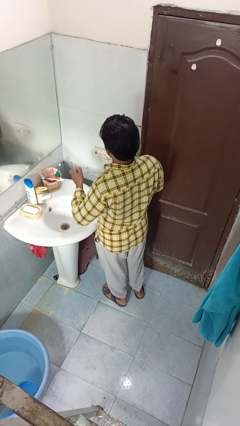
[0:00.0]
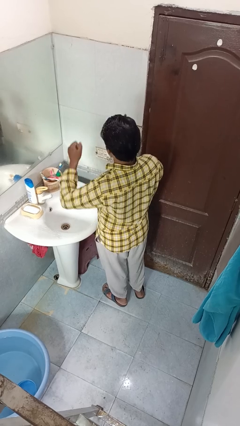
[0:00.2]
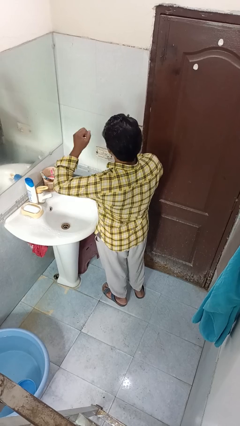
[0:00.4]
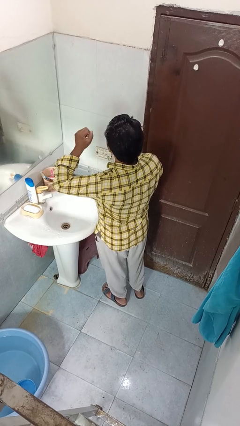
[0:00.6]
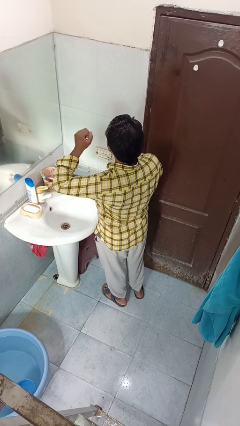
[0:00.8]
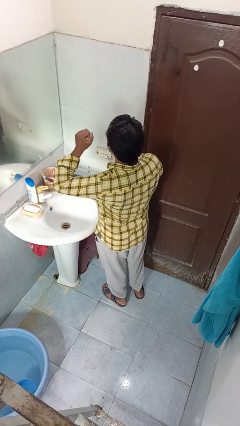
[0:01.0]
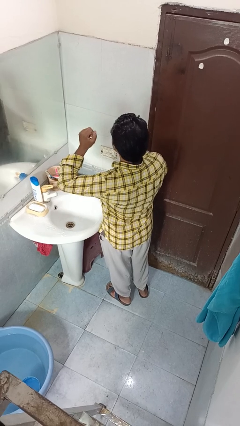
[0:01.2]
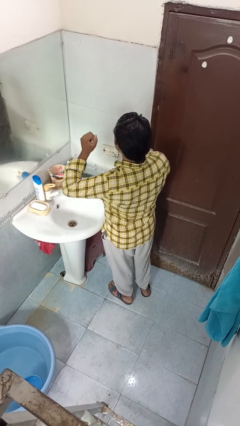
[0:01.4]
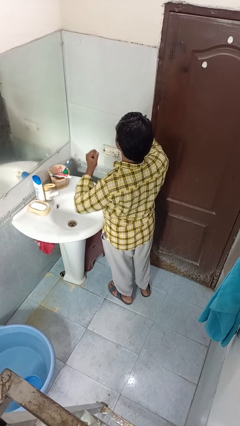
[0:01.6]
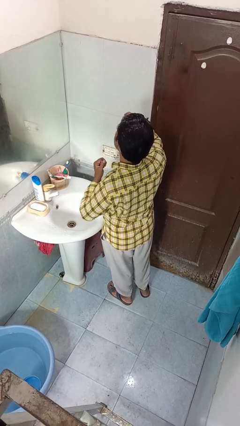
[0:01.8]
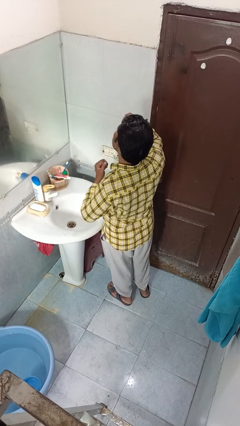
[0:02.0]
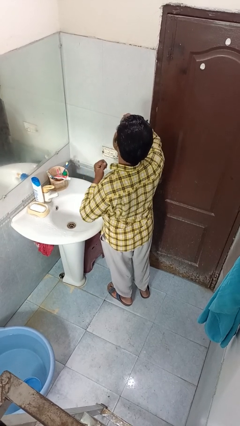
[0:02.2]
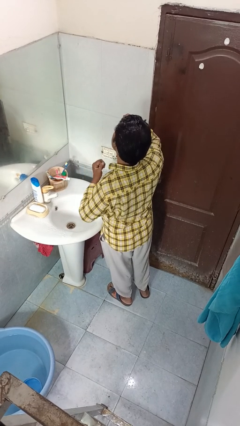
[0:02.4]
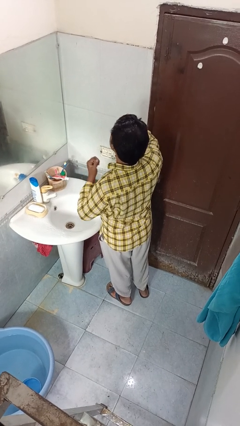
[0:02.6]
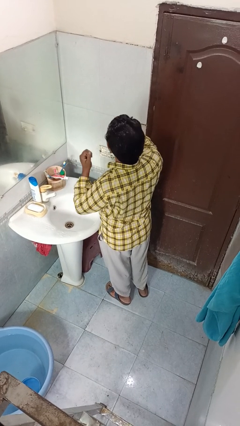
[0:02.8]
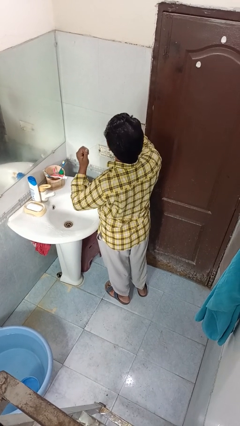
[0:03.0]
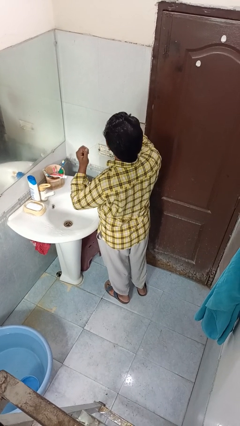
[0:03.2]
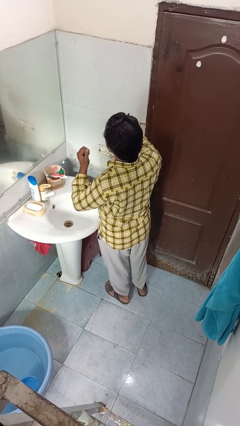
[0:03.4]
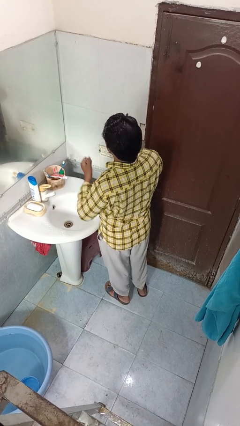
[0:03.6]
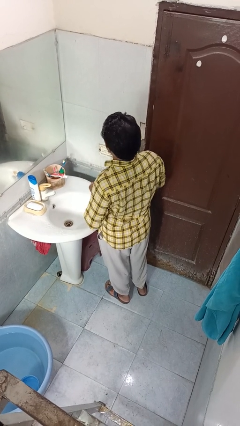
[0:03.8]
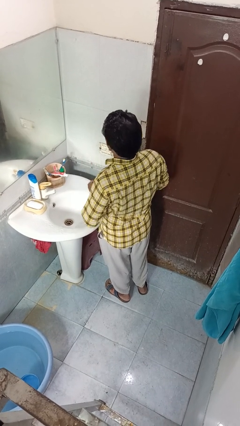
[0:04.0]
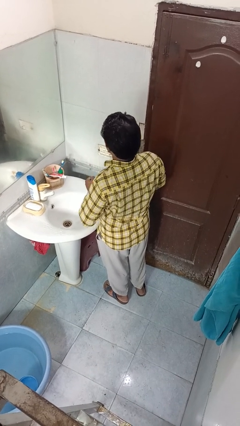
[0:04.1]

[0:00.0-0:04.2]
person flosses

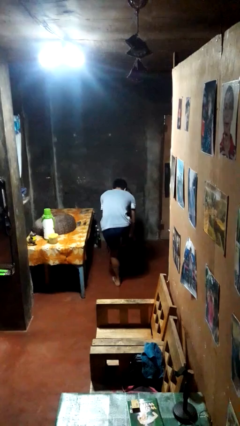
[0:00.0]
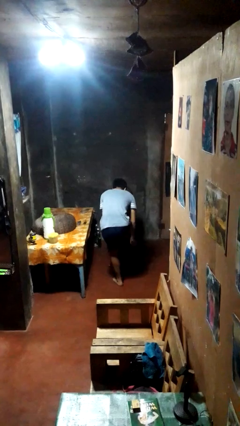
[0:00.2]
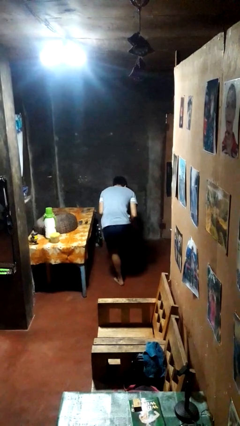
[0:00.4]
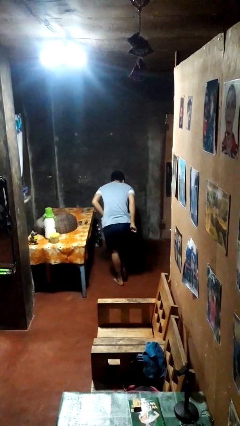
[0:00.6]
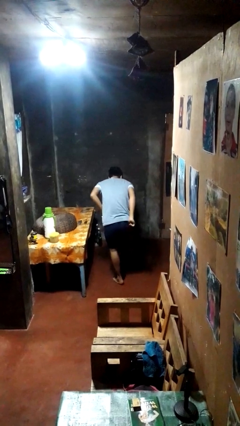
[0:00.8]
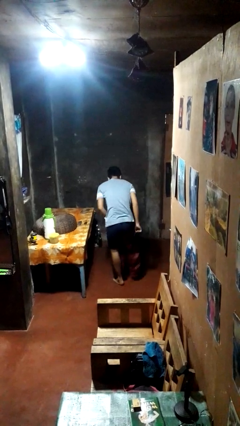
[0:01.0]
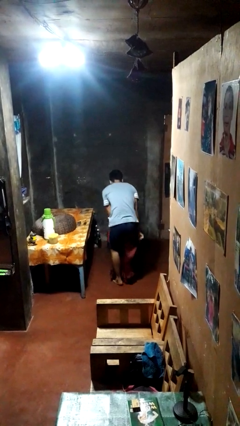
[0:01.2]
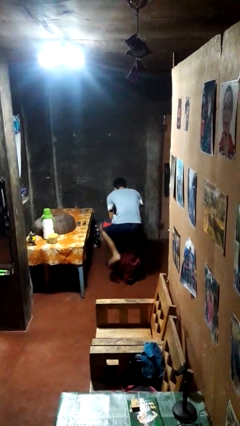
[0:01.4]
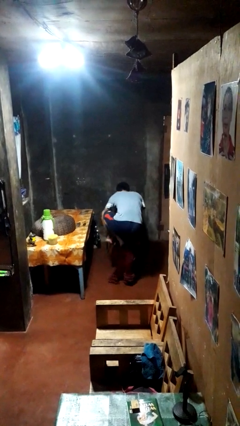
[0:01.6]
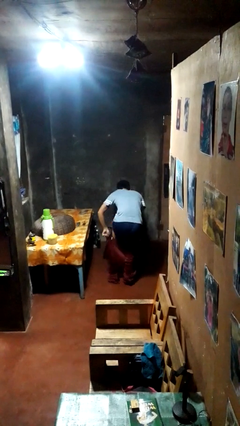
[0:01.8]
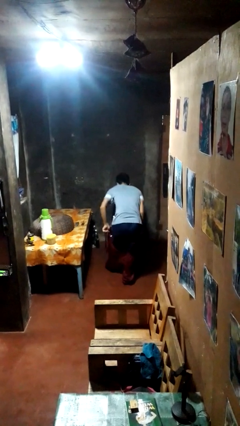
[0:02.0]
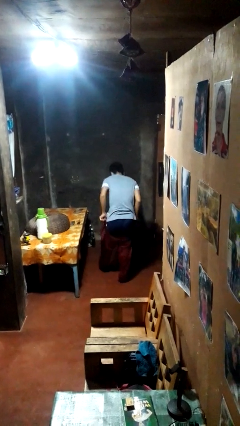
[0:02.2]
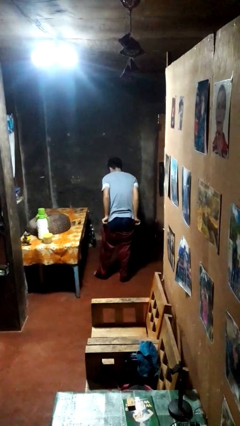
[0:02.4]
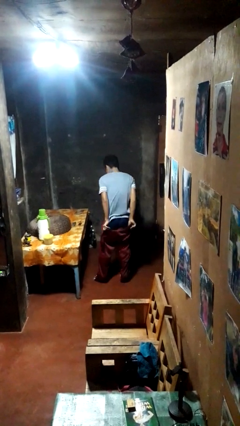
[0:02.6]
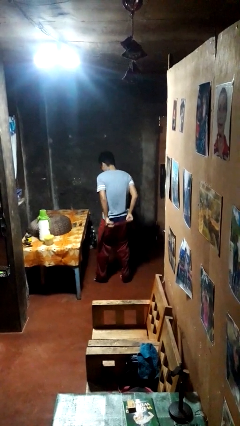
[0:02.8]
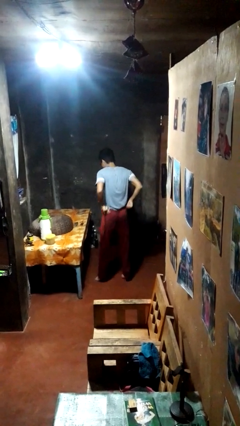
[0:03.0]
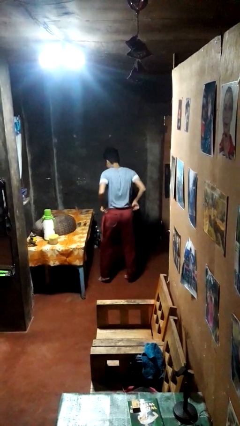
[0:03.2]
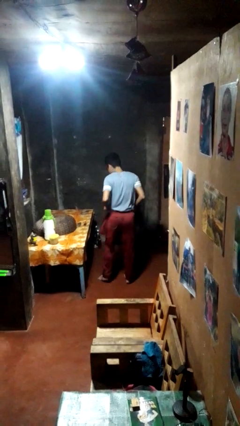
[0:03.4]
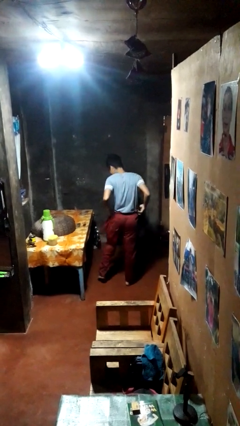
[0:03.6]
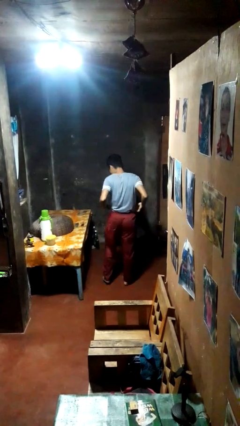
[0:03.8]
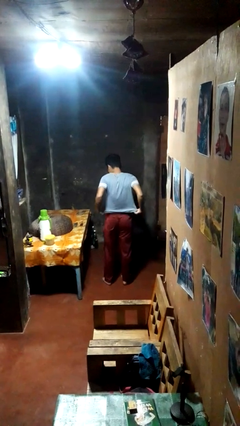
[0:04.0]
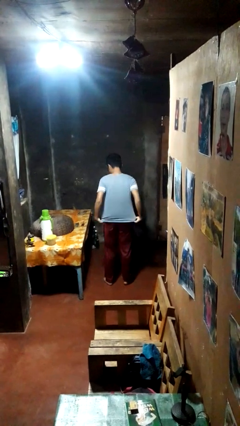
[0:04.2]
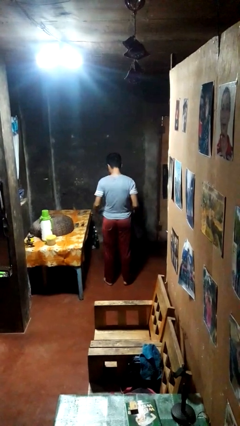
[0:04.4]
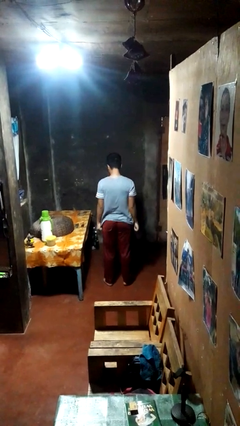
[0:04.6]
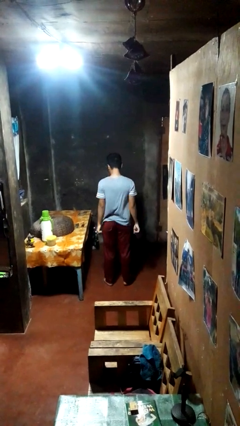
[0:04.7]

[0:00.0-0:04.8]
person puts on pants

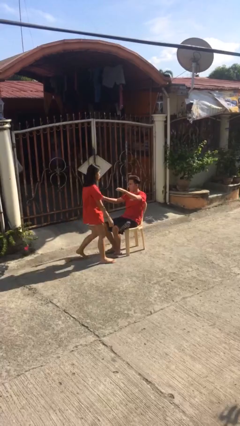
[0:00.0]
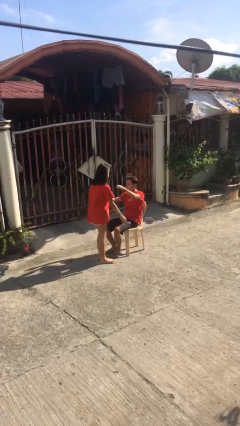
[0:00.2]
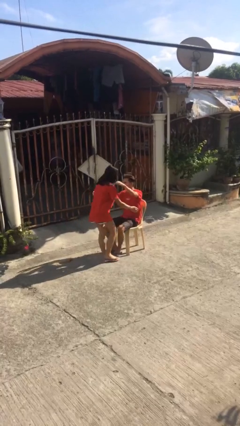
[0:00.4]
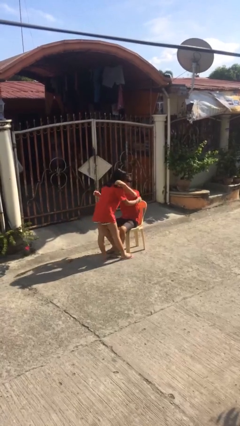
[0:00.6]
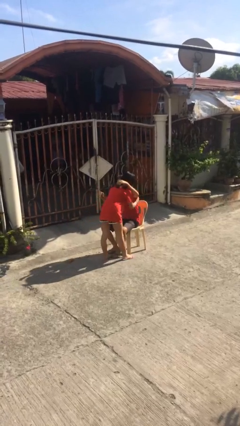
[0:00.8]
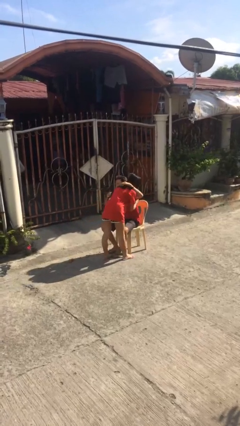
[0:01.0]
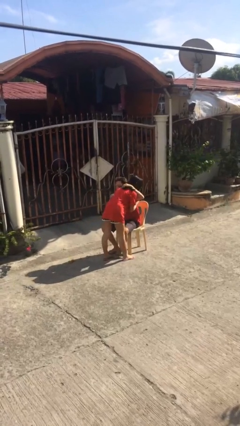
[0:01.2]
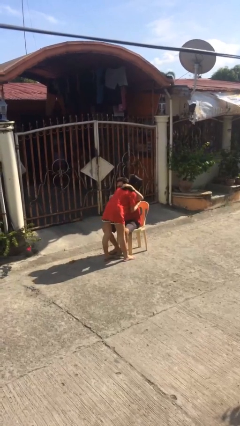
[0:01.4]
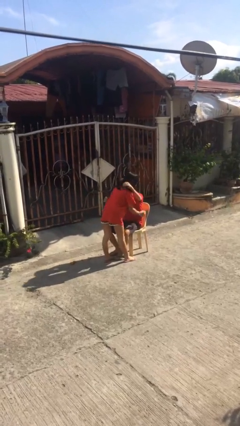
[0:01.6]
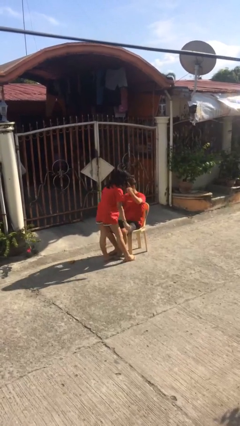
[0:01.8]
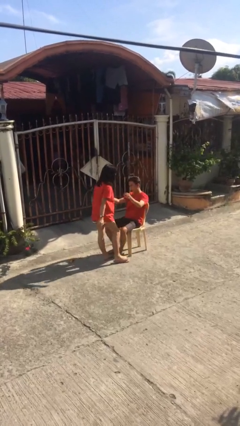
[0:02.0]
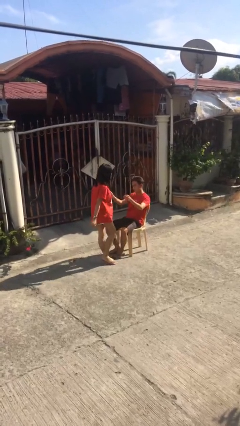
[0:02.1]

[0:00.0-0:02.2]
person embraces person

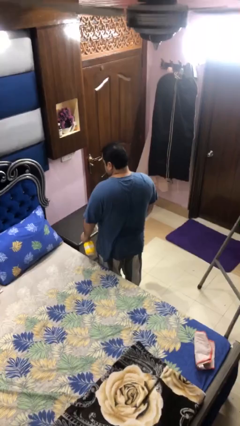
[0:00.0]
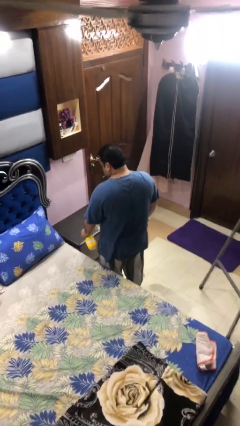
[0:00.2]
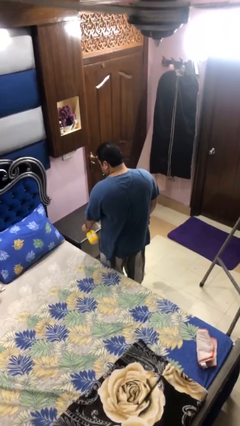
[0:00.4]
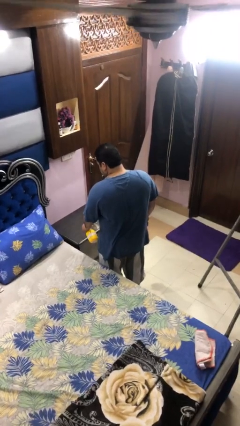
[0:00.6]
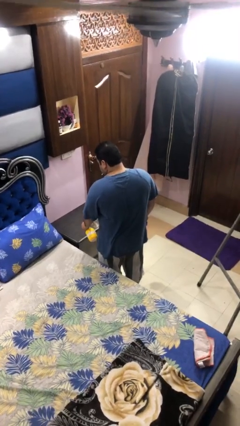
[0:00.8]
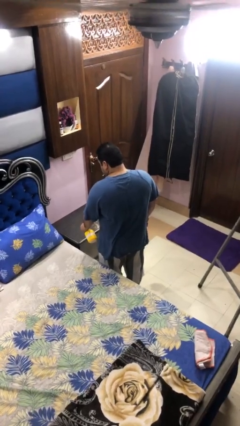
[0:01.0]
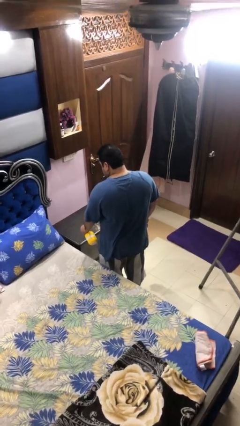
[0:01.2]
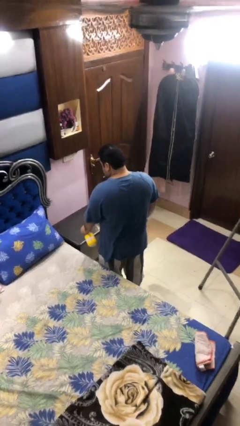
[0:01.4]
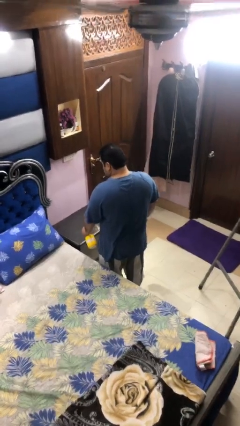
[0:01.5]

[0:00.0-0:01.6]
person sprays from bottle

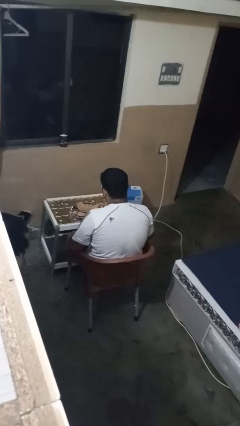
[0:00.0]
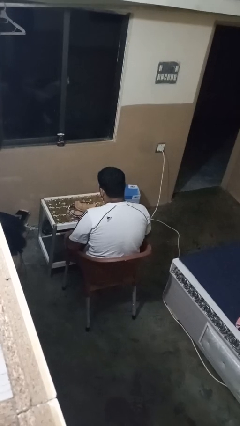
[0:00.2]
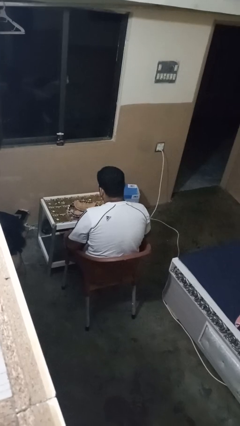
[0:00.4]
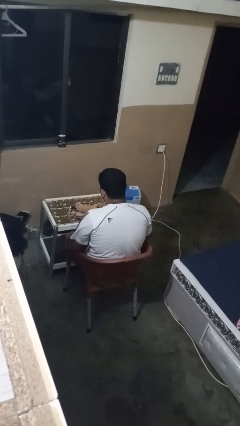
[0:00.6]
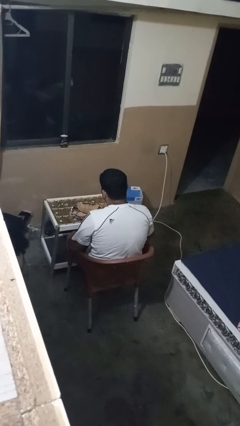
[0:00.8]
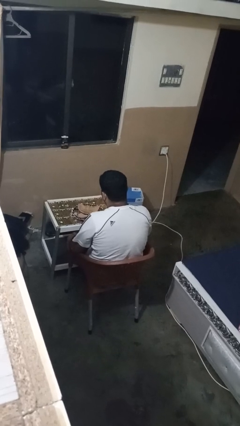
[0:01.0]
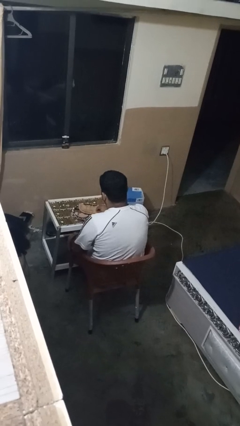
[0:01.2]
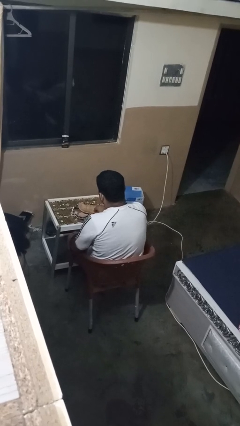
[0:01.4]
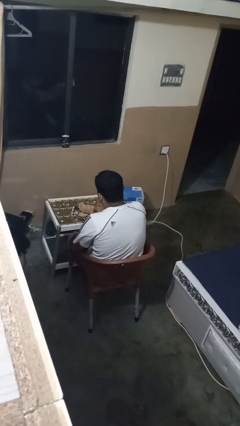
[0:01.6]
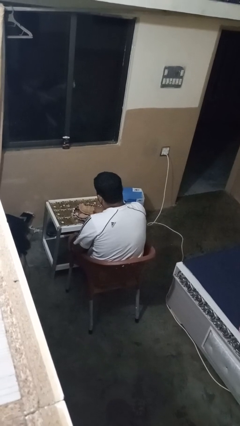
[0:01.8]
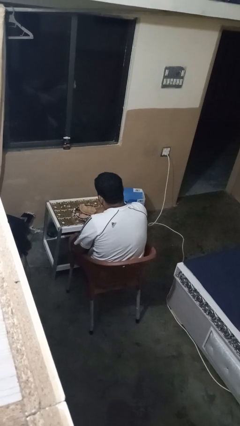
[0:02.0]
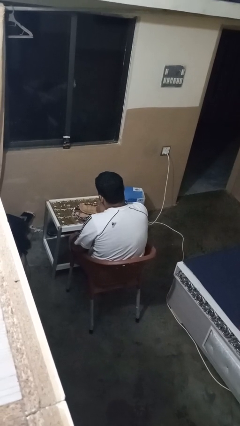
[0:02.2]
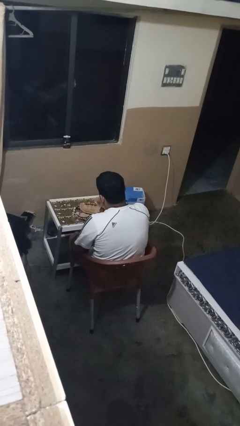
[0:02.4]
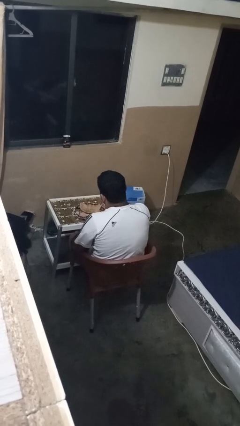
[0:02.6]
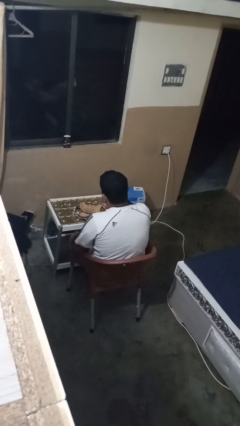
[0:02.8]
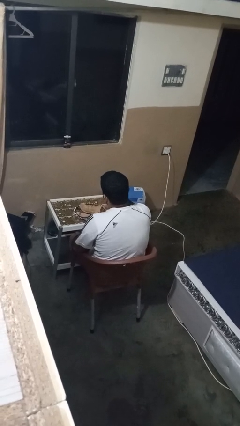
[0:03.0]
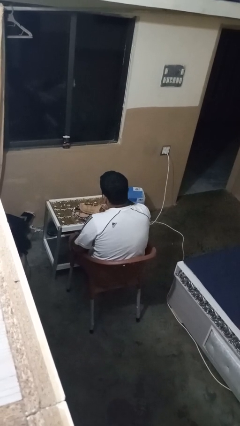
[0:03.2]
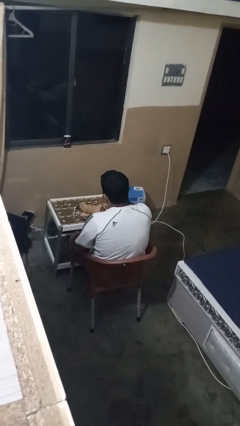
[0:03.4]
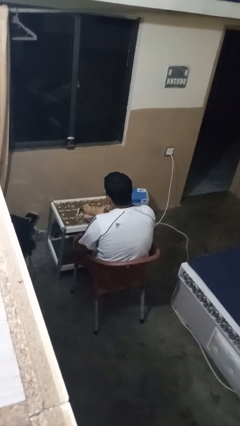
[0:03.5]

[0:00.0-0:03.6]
person eats with hands

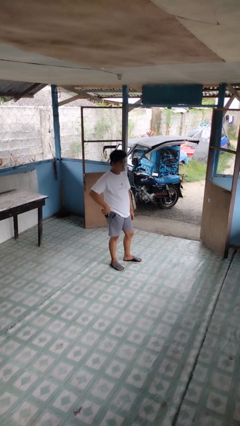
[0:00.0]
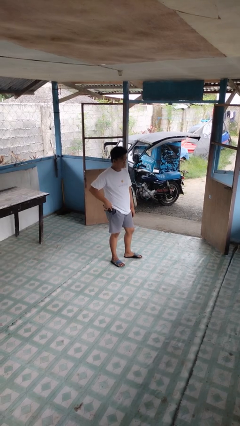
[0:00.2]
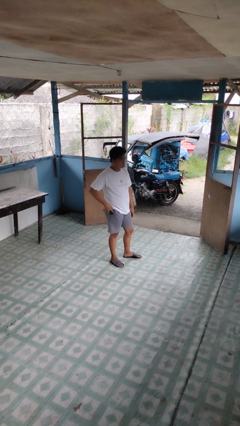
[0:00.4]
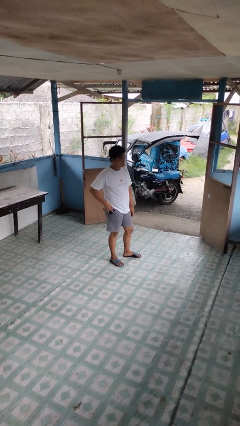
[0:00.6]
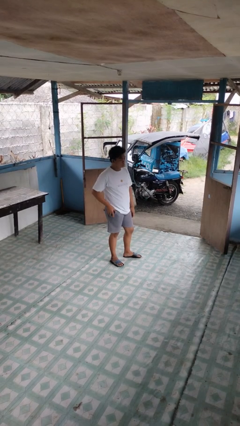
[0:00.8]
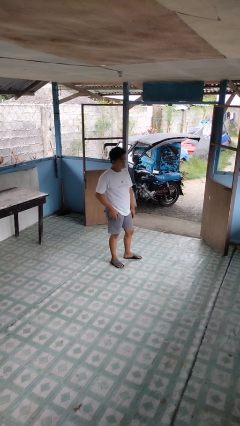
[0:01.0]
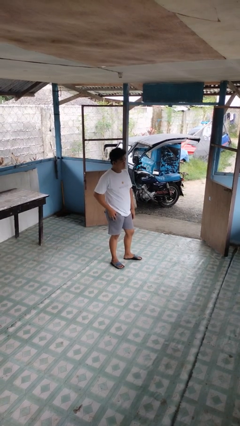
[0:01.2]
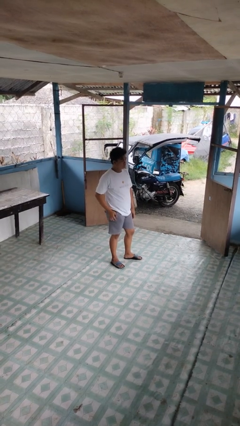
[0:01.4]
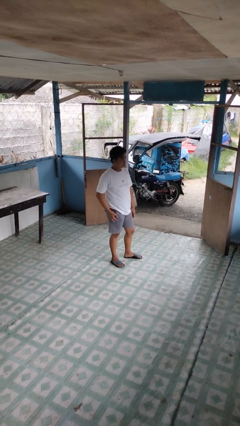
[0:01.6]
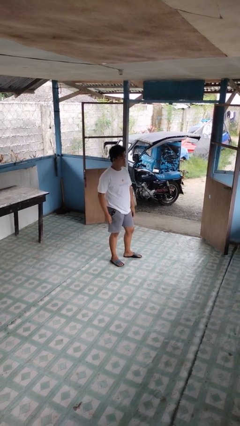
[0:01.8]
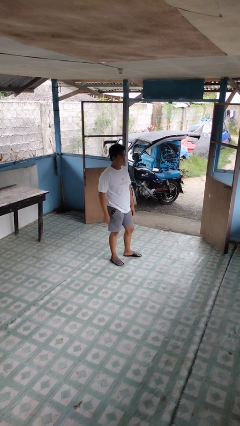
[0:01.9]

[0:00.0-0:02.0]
person puts phone into pocket
